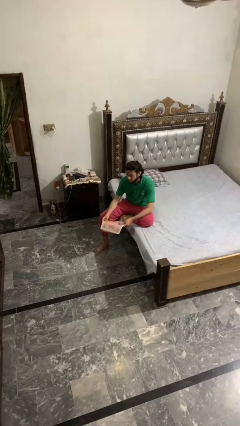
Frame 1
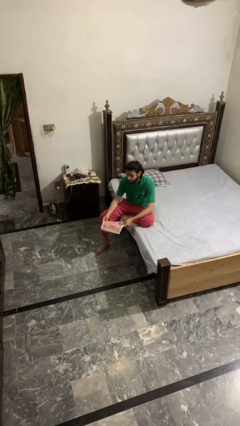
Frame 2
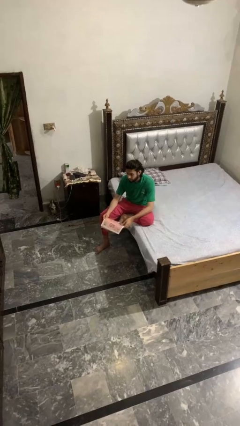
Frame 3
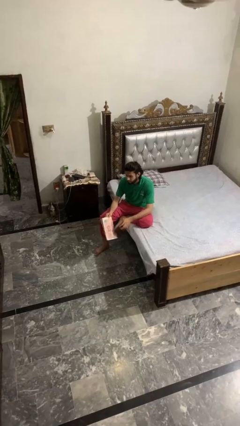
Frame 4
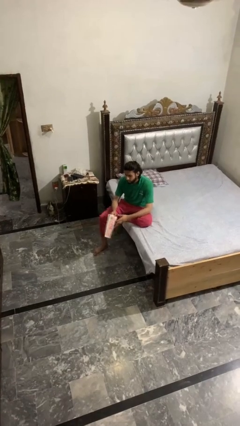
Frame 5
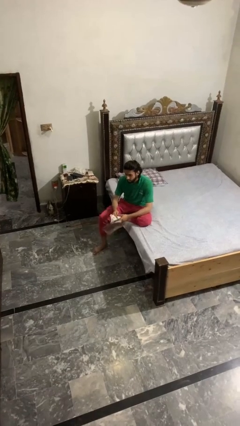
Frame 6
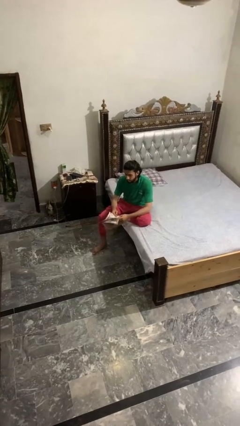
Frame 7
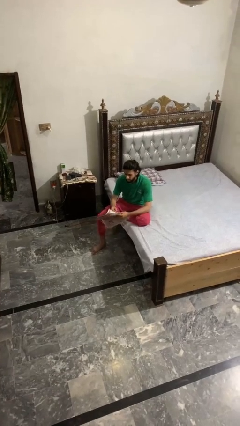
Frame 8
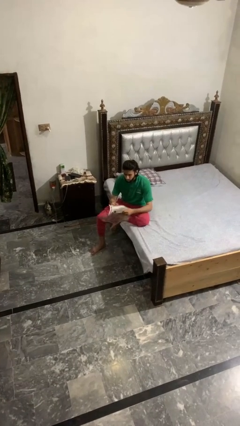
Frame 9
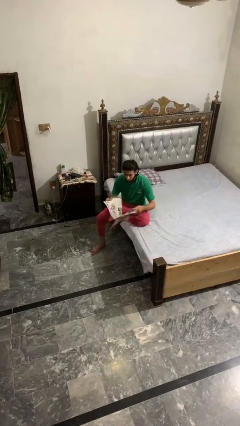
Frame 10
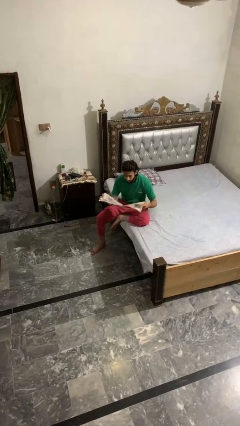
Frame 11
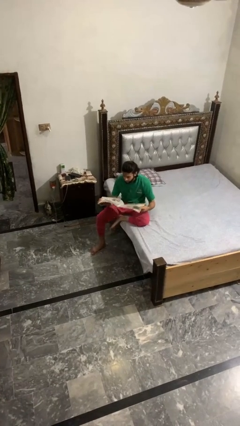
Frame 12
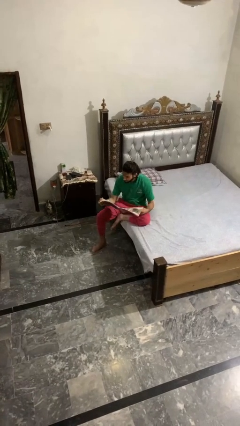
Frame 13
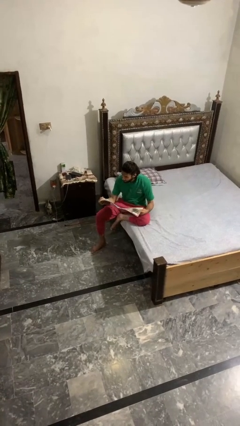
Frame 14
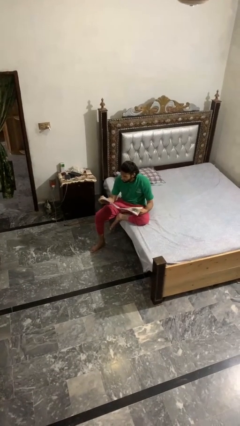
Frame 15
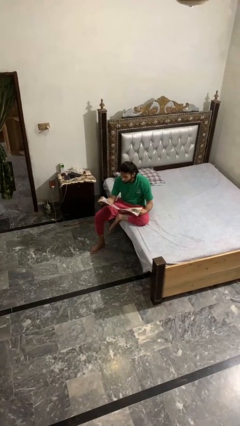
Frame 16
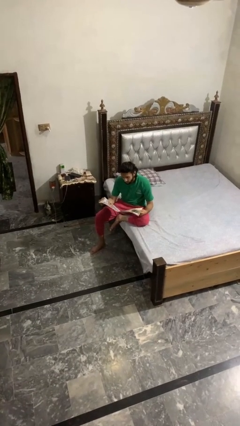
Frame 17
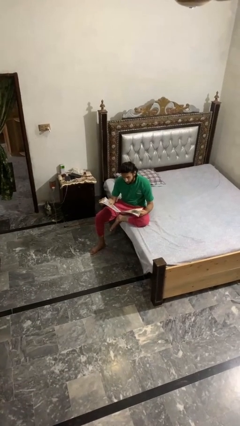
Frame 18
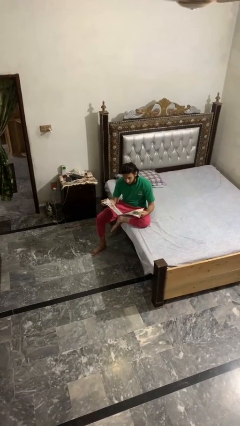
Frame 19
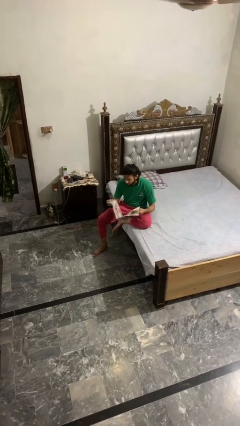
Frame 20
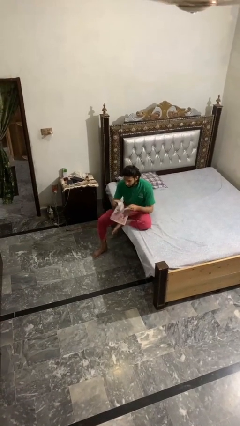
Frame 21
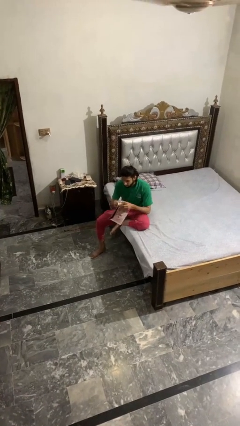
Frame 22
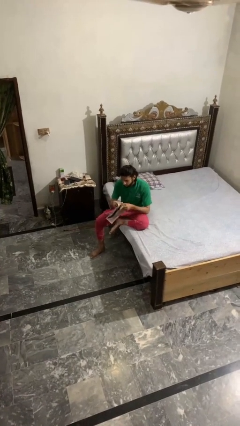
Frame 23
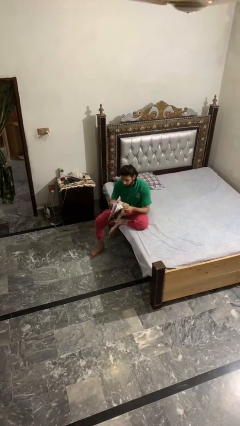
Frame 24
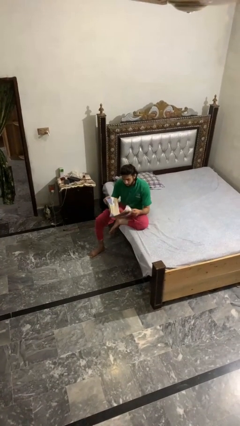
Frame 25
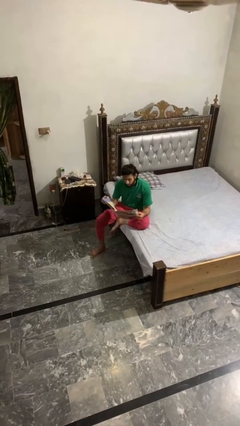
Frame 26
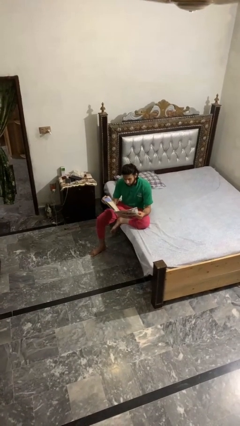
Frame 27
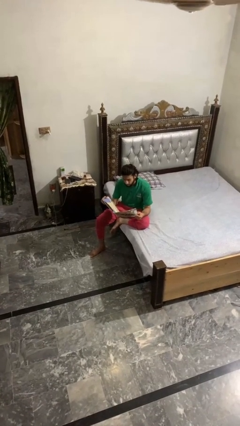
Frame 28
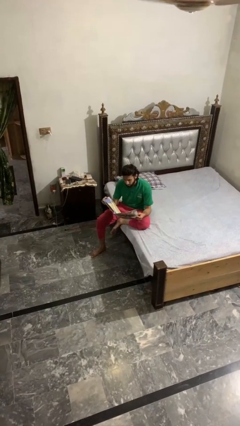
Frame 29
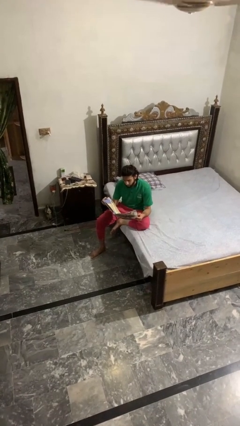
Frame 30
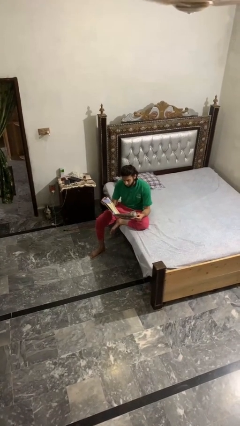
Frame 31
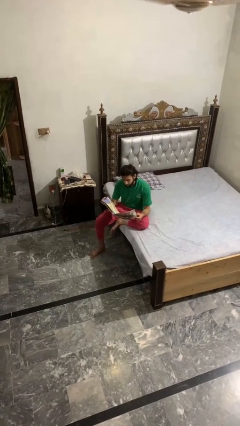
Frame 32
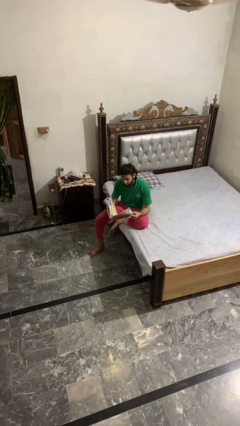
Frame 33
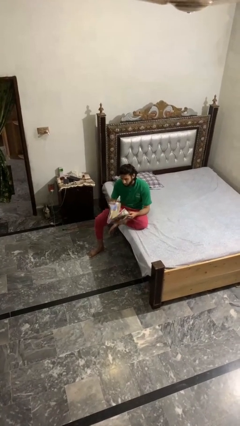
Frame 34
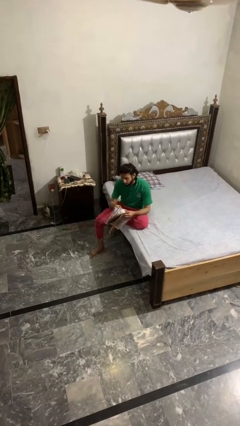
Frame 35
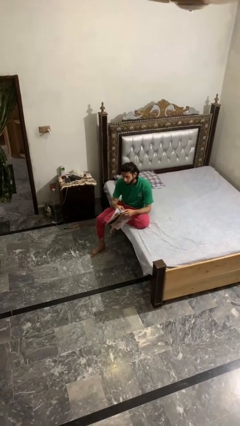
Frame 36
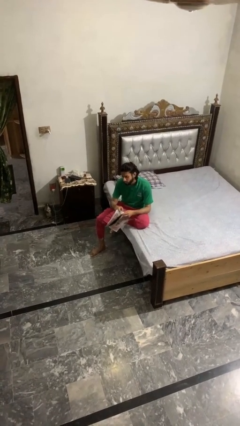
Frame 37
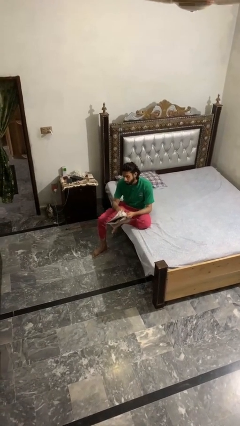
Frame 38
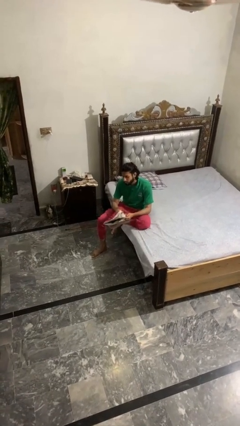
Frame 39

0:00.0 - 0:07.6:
person reads magazine

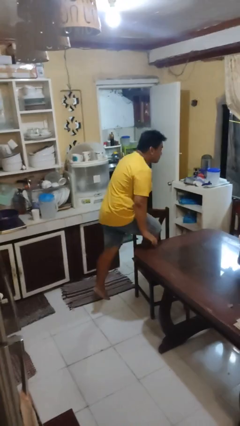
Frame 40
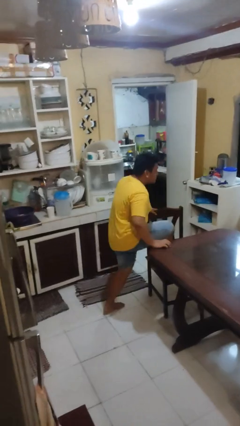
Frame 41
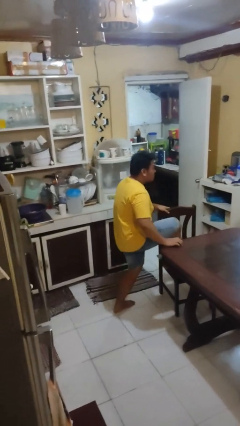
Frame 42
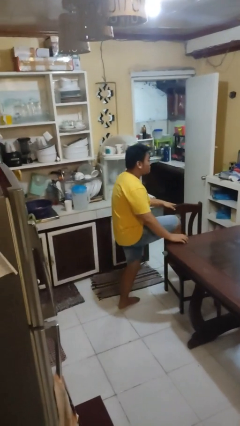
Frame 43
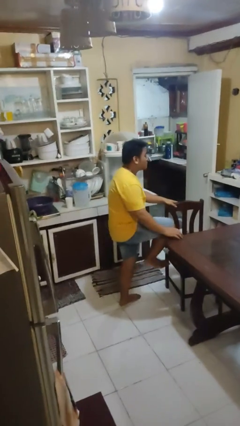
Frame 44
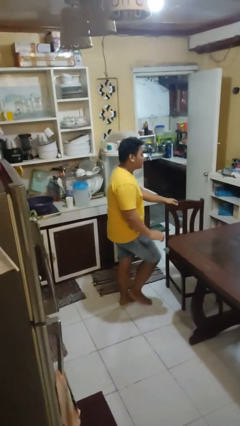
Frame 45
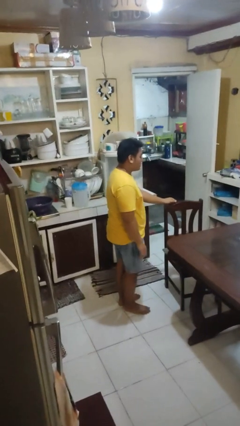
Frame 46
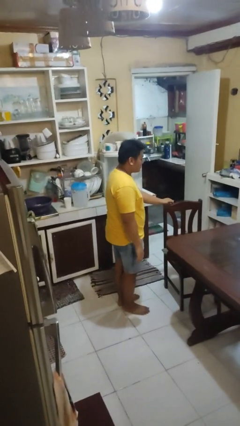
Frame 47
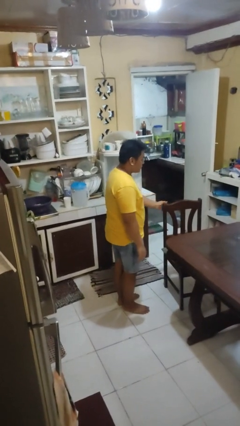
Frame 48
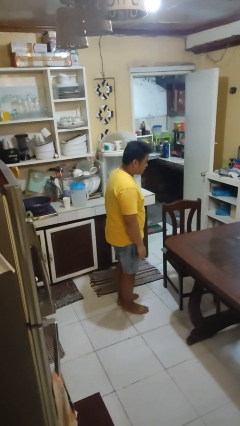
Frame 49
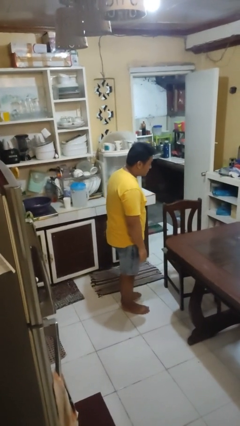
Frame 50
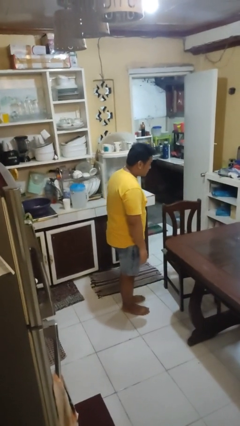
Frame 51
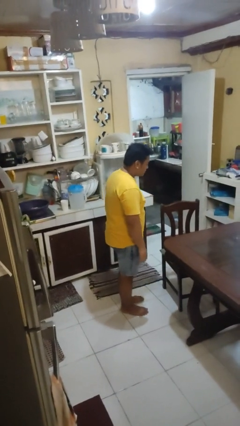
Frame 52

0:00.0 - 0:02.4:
person climbs off chair

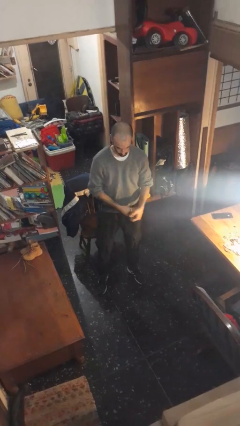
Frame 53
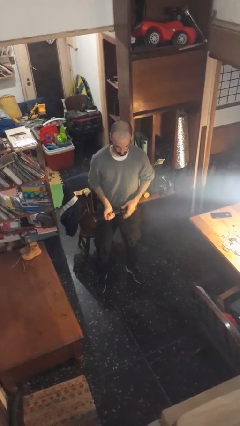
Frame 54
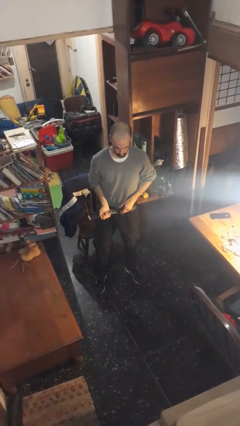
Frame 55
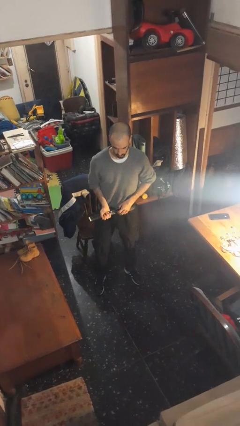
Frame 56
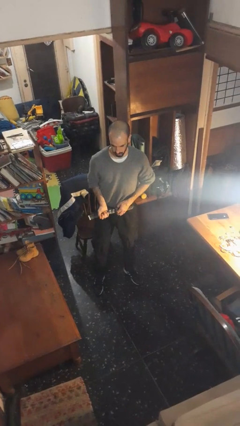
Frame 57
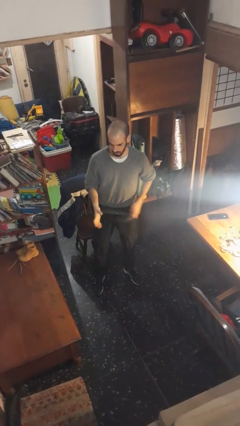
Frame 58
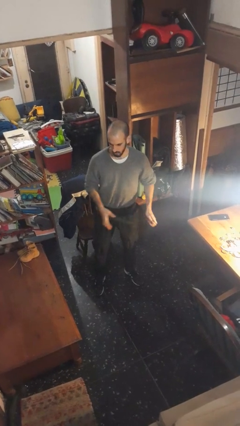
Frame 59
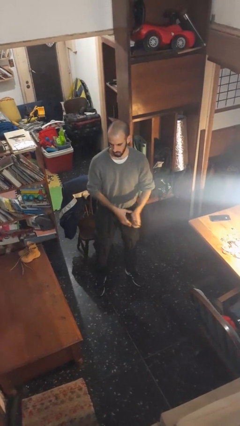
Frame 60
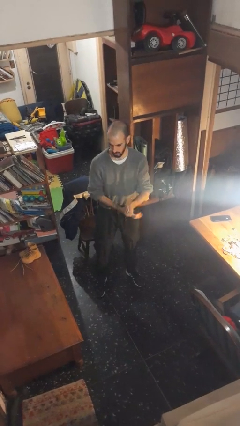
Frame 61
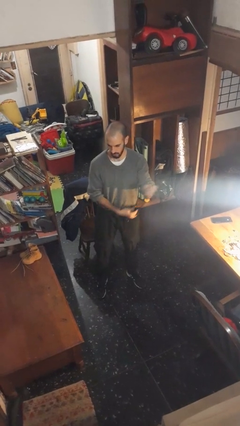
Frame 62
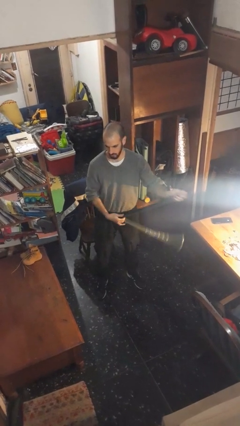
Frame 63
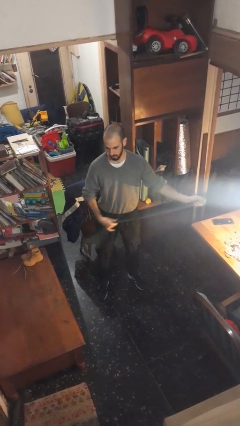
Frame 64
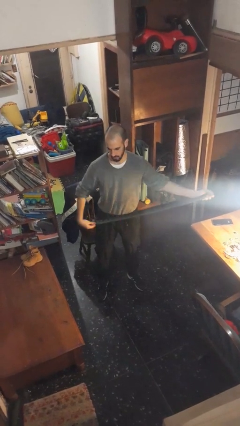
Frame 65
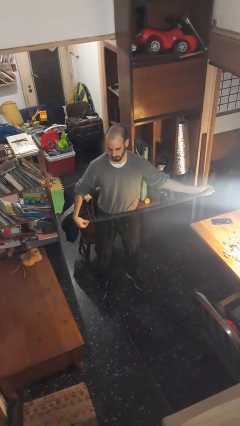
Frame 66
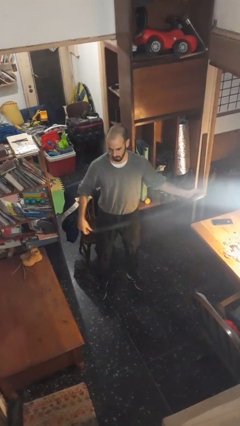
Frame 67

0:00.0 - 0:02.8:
person takes off belt

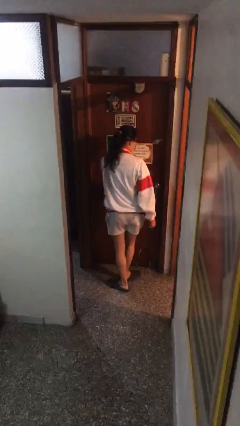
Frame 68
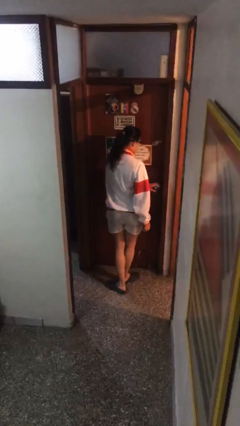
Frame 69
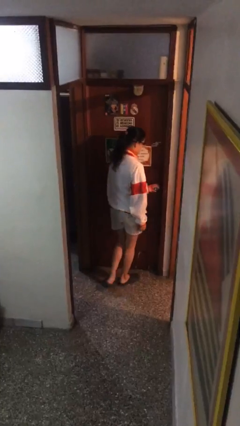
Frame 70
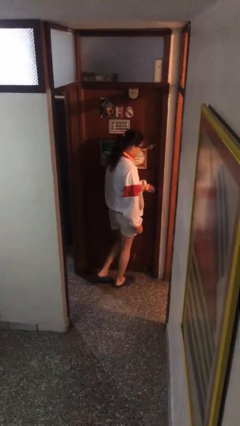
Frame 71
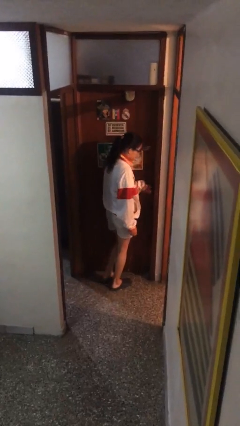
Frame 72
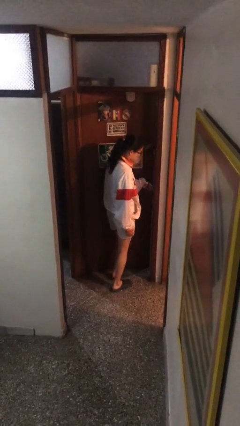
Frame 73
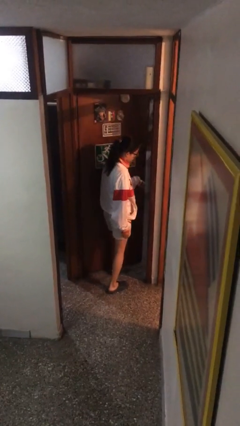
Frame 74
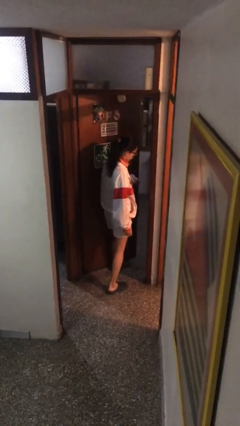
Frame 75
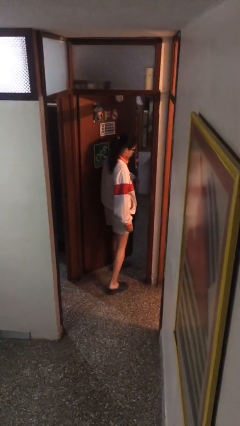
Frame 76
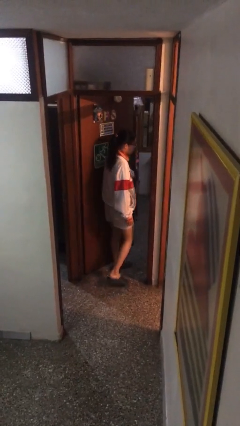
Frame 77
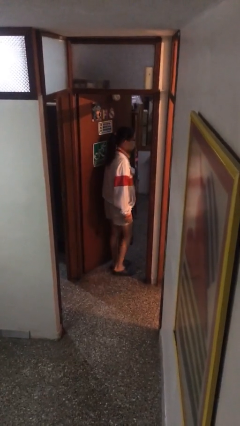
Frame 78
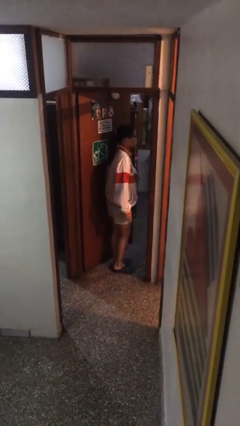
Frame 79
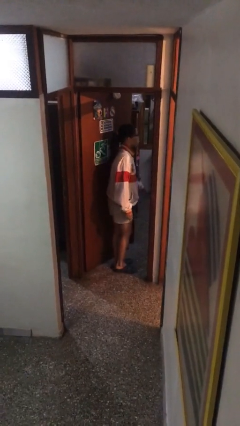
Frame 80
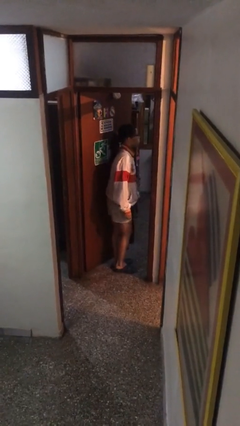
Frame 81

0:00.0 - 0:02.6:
person opens facility door

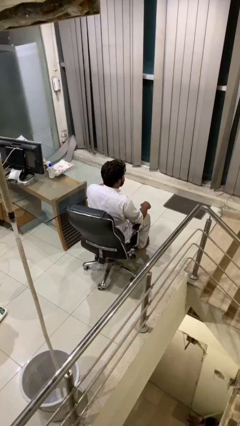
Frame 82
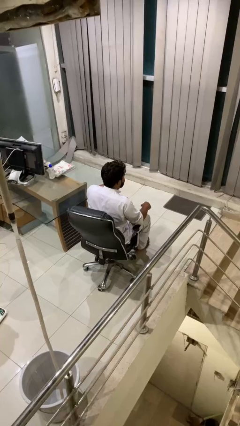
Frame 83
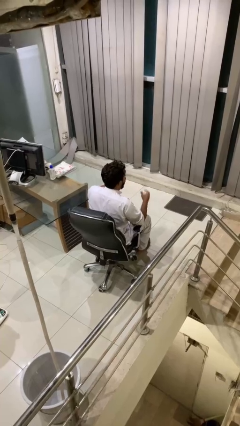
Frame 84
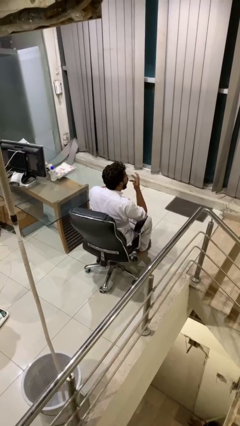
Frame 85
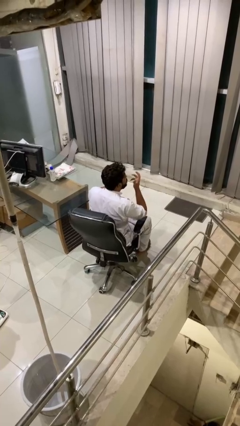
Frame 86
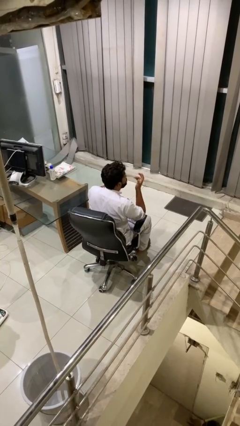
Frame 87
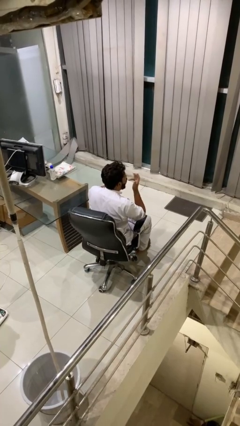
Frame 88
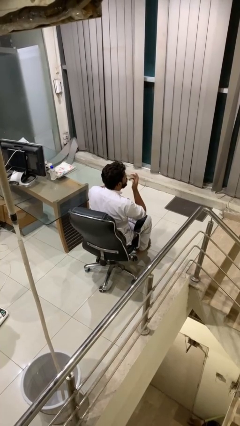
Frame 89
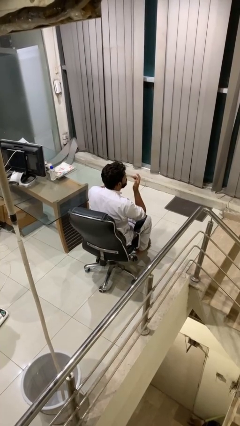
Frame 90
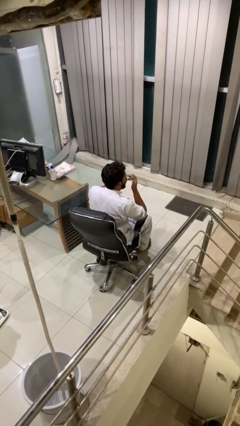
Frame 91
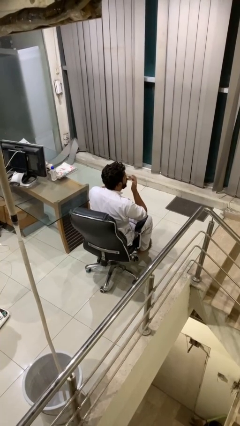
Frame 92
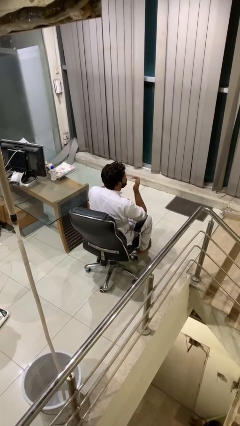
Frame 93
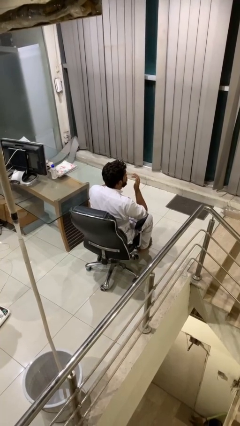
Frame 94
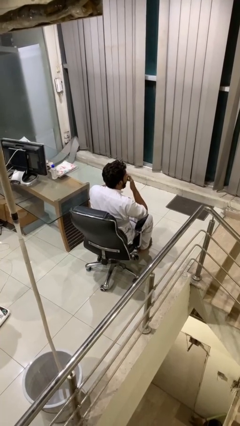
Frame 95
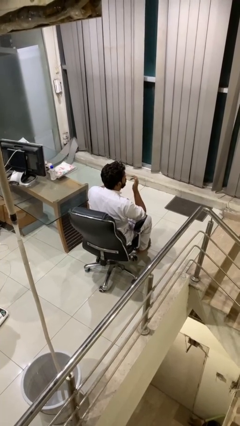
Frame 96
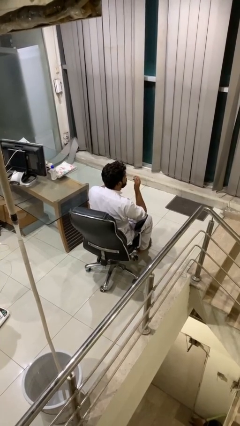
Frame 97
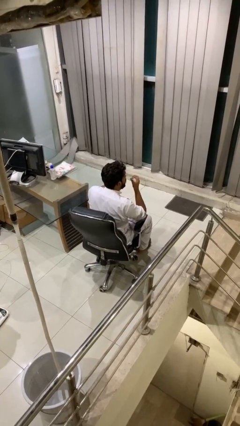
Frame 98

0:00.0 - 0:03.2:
person licks fingers
